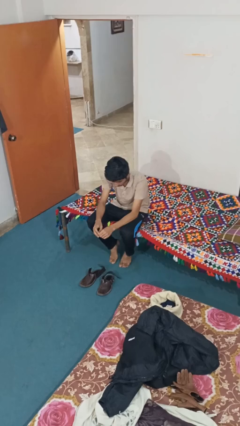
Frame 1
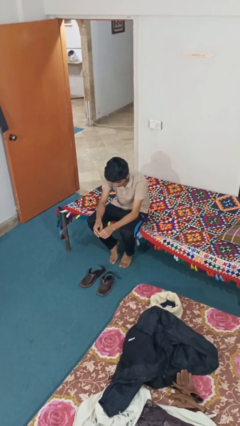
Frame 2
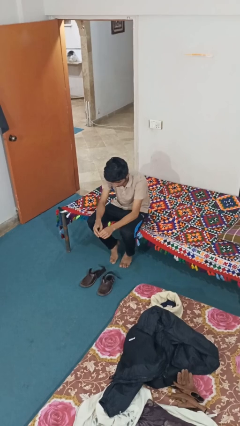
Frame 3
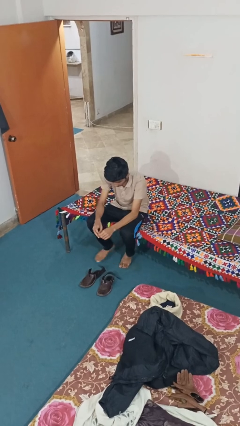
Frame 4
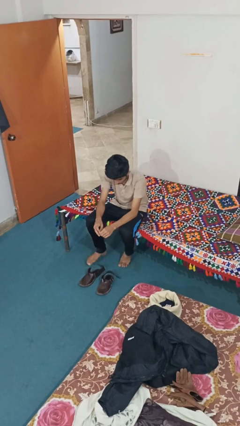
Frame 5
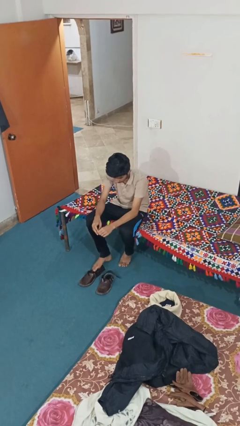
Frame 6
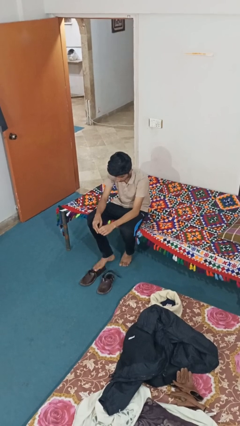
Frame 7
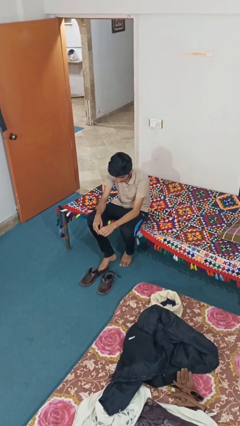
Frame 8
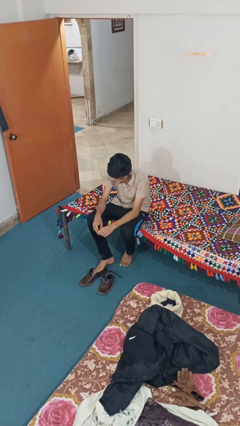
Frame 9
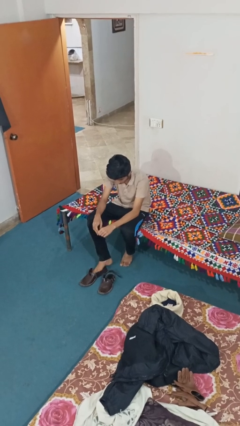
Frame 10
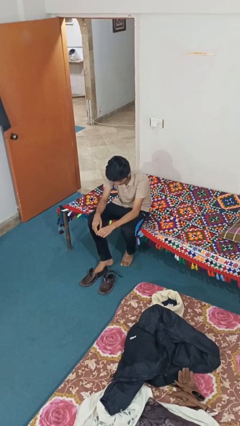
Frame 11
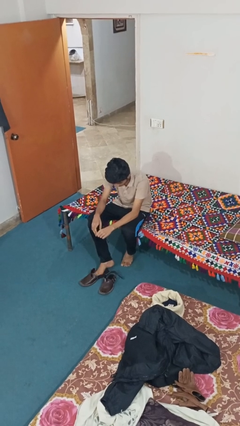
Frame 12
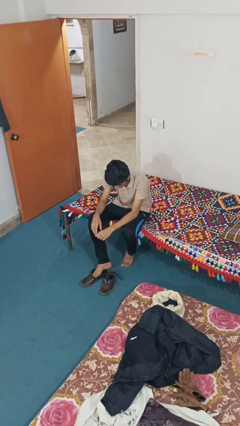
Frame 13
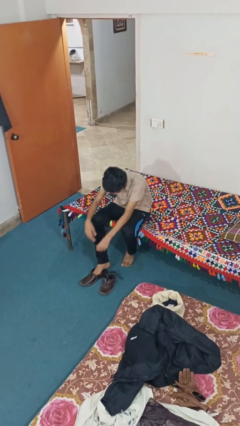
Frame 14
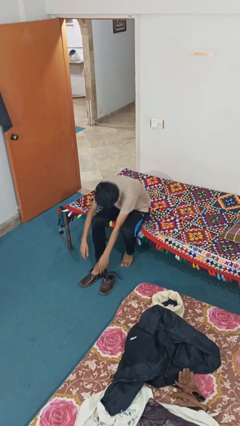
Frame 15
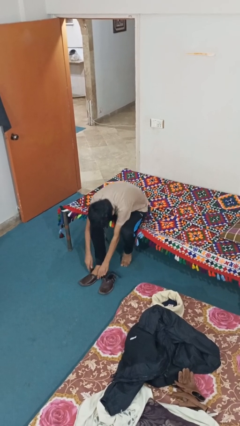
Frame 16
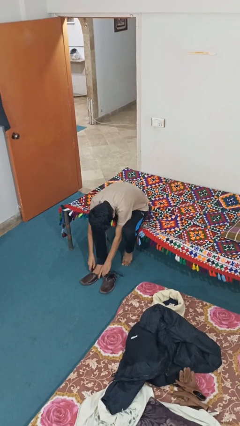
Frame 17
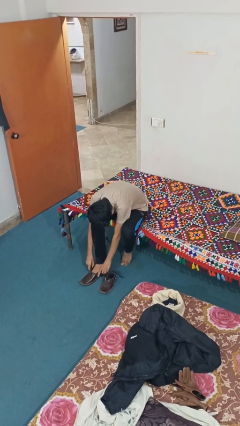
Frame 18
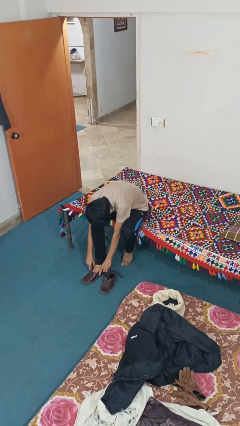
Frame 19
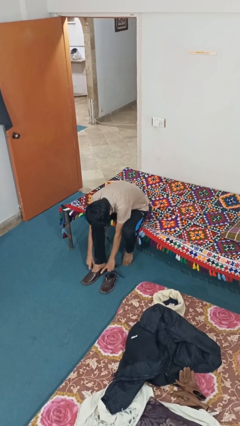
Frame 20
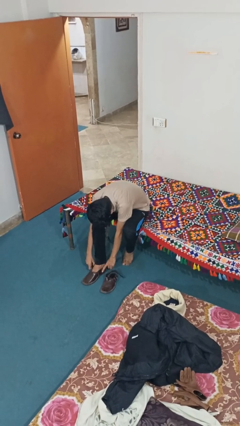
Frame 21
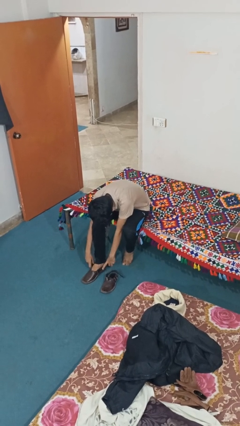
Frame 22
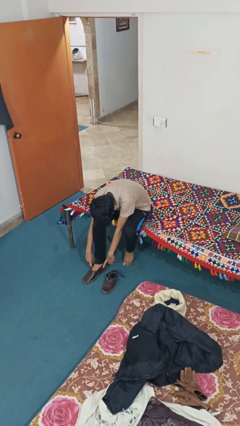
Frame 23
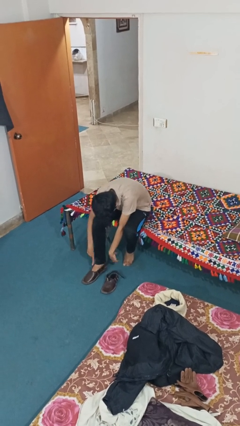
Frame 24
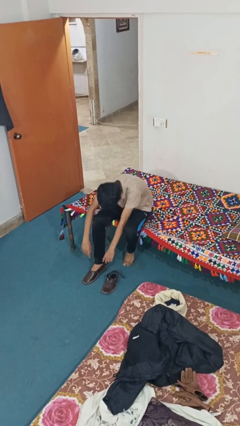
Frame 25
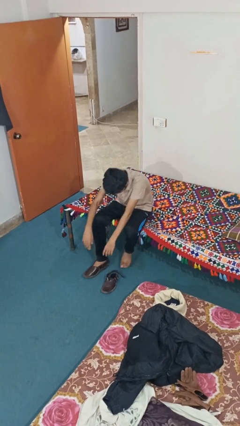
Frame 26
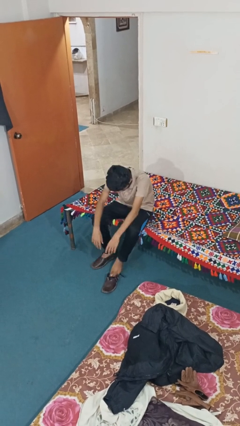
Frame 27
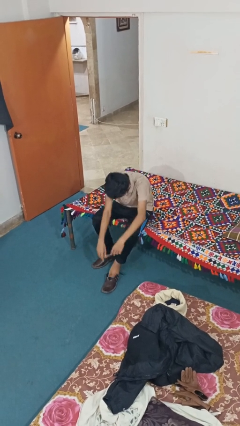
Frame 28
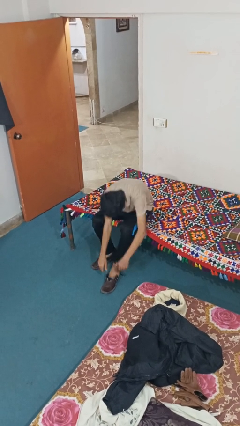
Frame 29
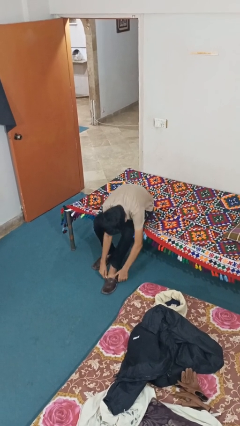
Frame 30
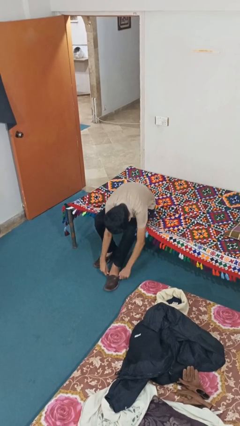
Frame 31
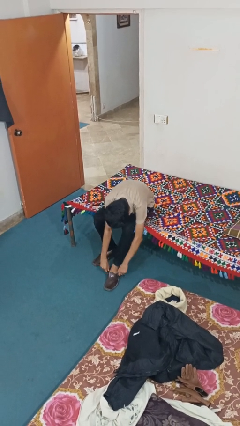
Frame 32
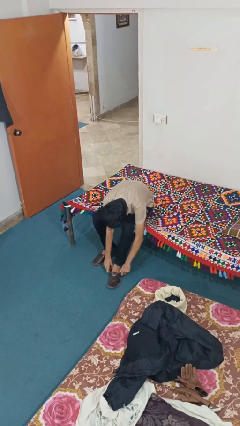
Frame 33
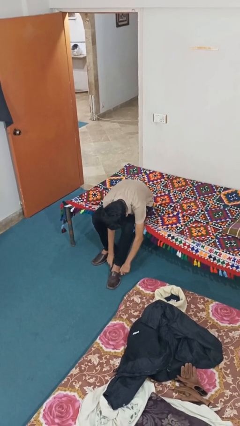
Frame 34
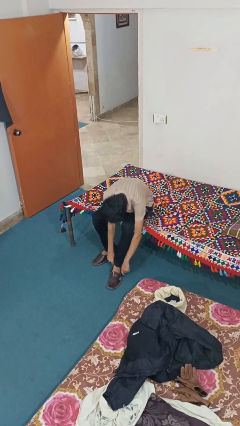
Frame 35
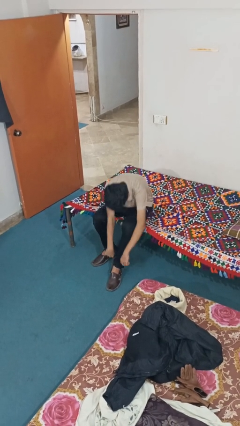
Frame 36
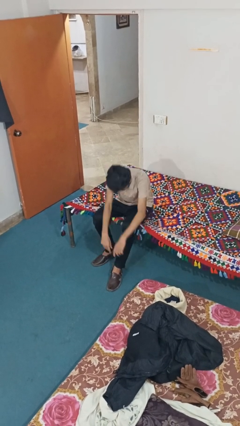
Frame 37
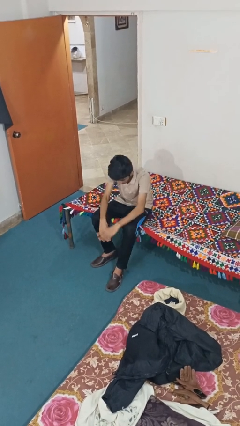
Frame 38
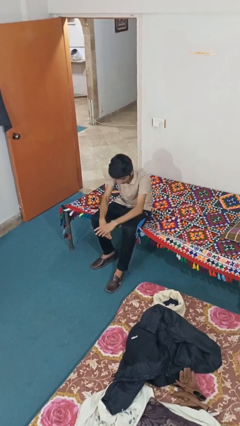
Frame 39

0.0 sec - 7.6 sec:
person puts on shoes

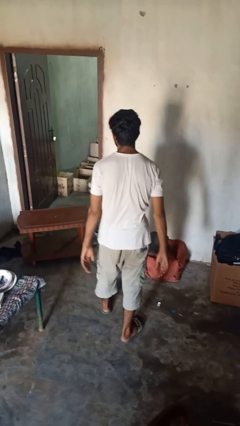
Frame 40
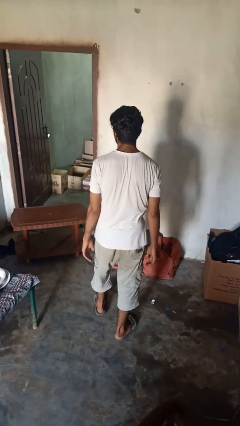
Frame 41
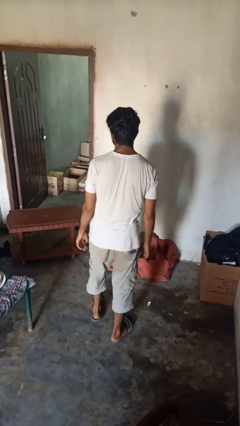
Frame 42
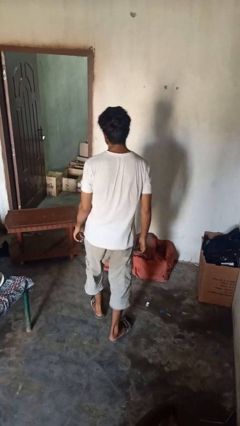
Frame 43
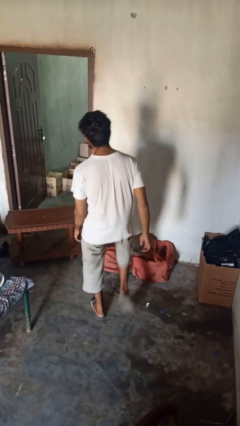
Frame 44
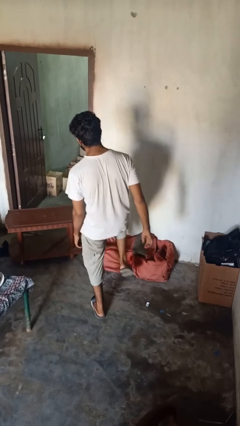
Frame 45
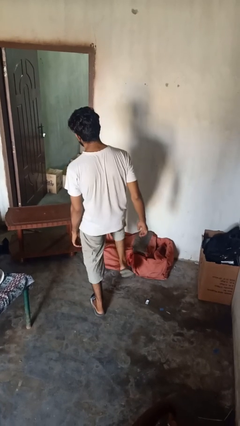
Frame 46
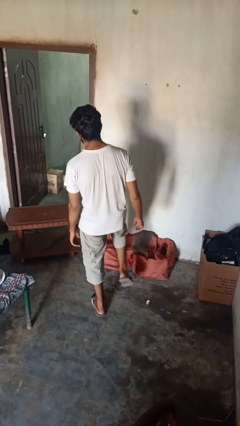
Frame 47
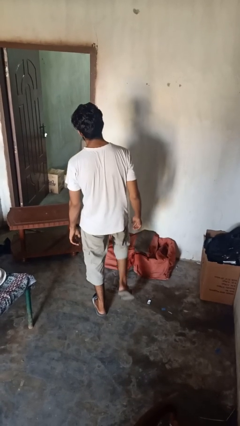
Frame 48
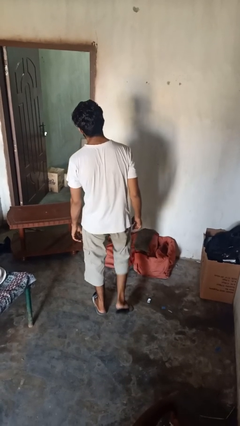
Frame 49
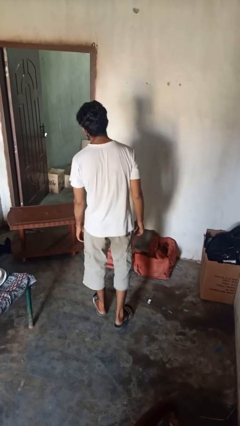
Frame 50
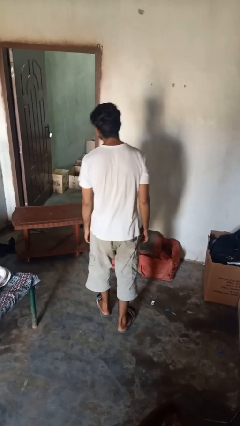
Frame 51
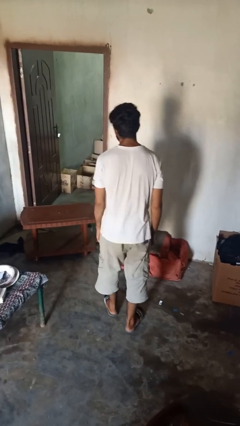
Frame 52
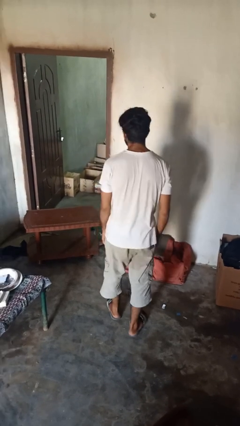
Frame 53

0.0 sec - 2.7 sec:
person karate kicks

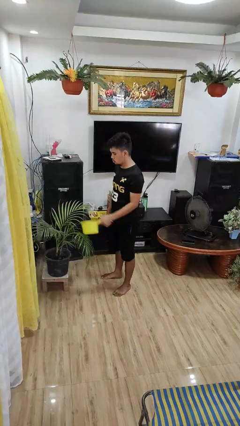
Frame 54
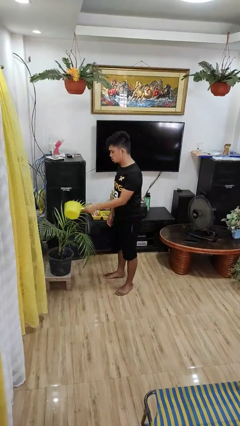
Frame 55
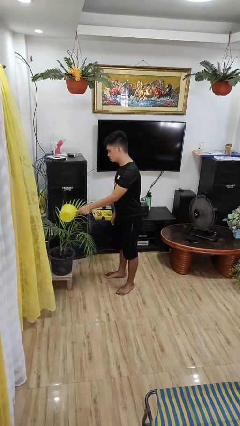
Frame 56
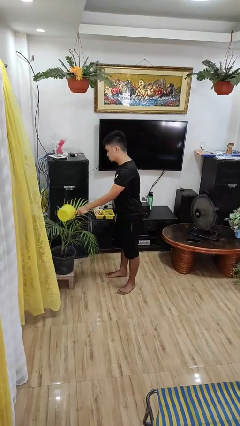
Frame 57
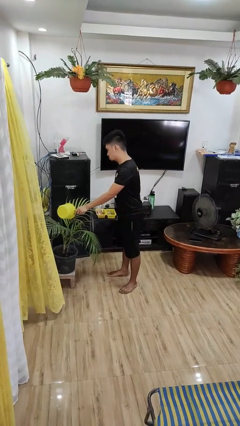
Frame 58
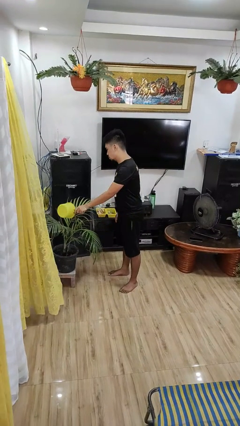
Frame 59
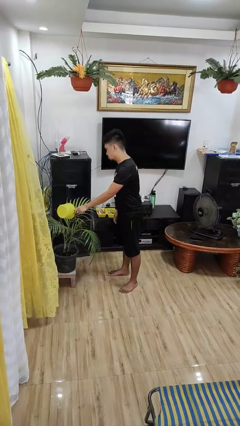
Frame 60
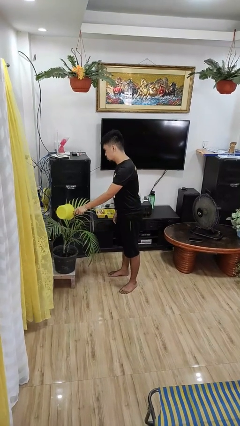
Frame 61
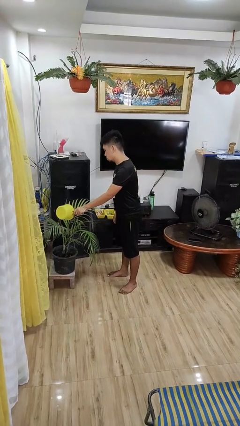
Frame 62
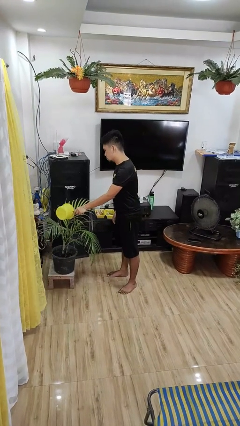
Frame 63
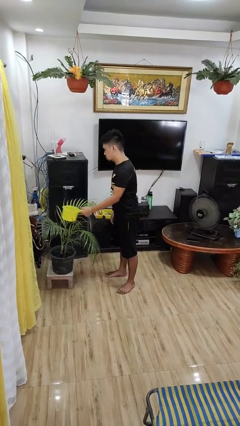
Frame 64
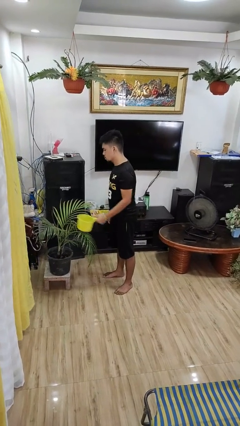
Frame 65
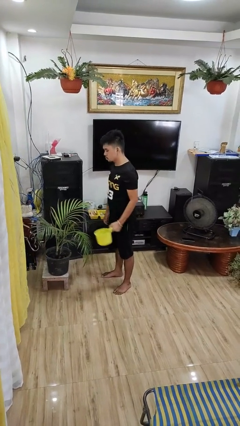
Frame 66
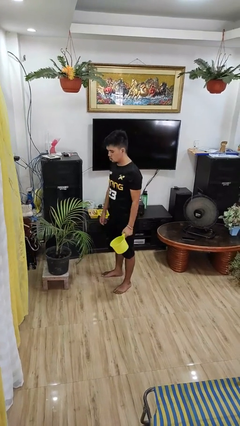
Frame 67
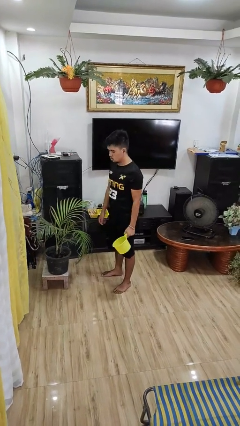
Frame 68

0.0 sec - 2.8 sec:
person waters houseplant

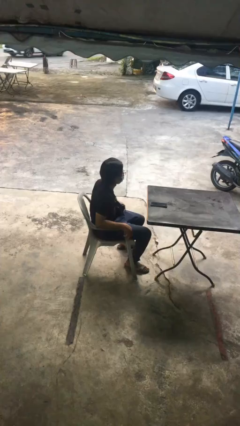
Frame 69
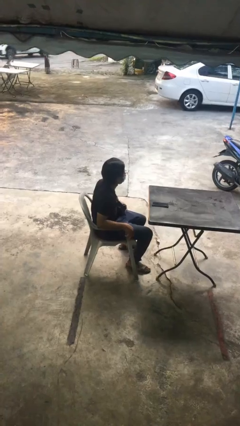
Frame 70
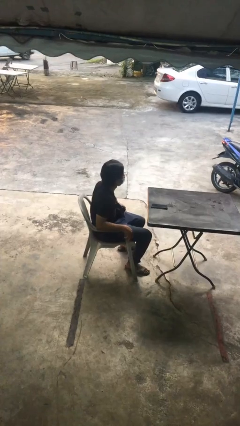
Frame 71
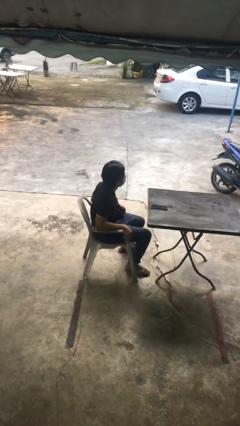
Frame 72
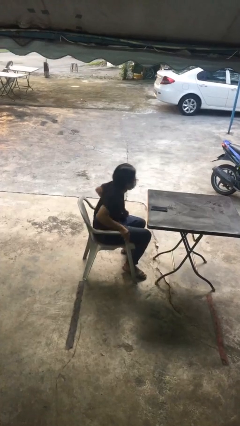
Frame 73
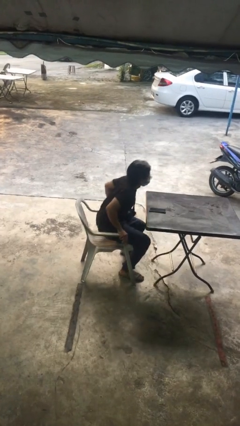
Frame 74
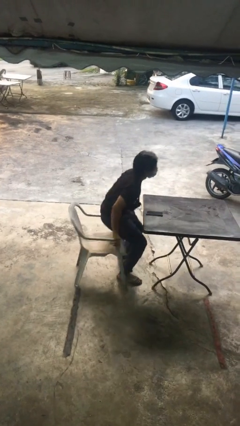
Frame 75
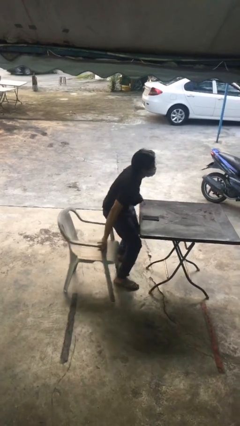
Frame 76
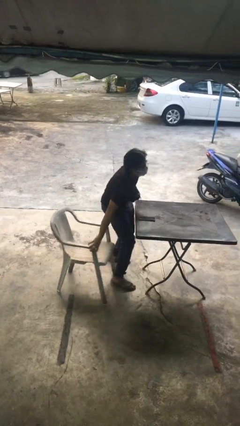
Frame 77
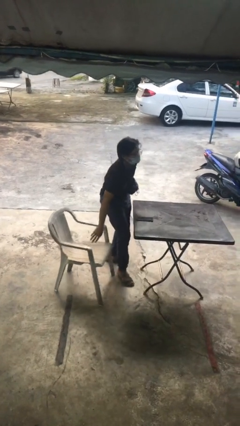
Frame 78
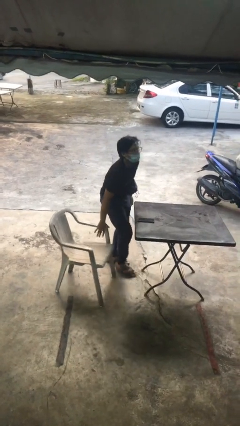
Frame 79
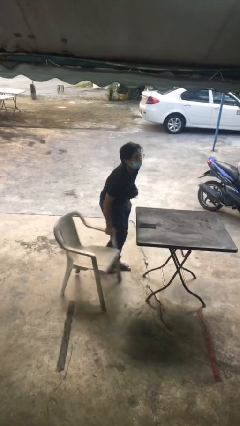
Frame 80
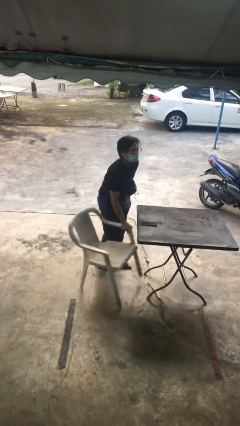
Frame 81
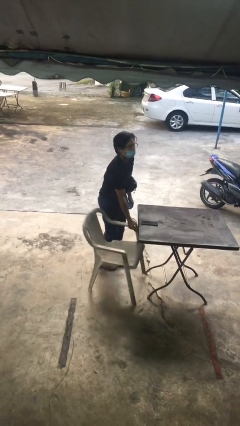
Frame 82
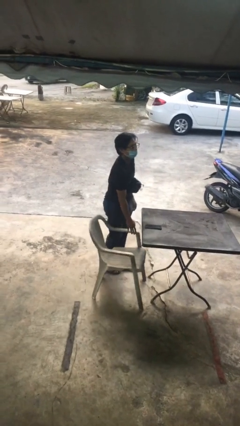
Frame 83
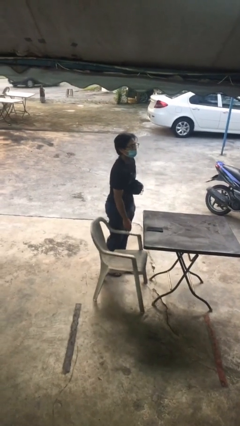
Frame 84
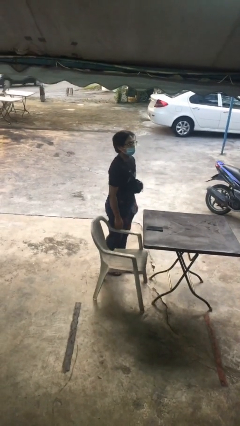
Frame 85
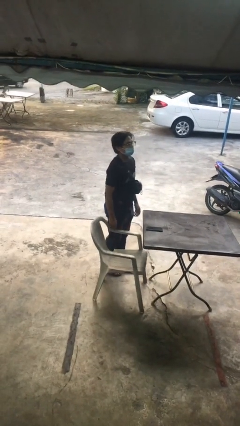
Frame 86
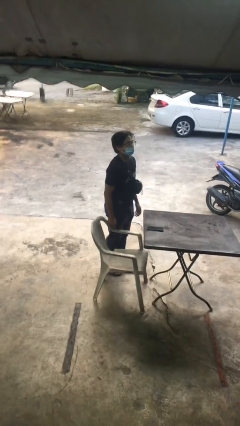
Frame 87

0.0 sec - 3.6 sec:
person stands up

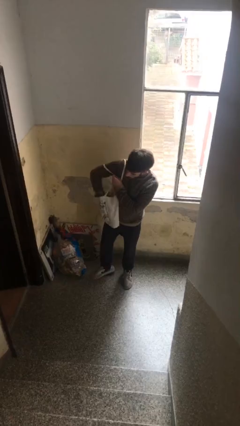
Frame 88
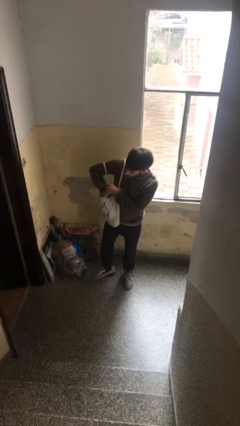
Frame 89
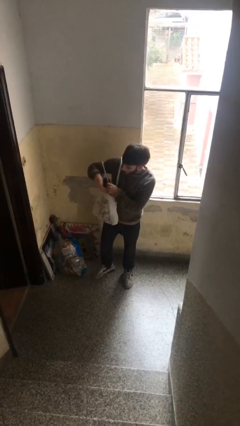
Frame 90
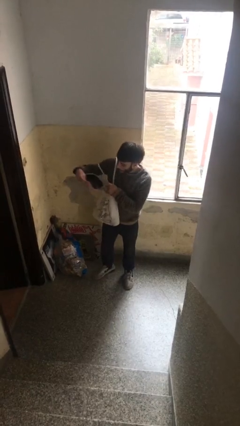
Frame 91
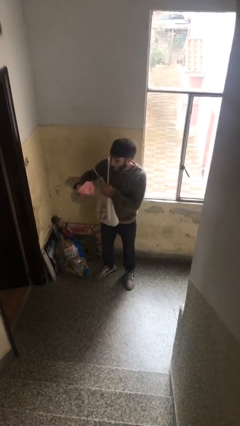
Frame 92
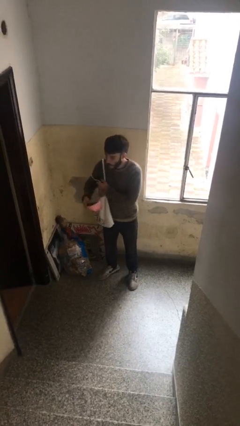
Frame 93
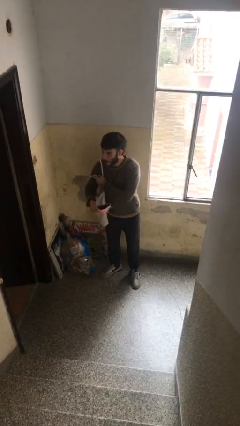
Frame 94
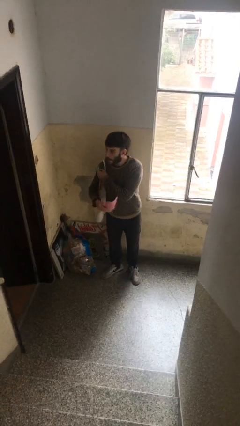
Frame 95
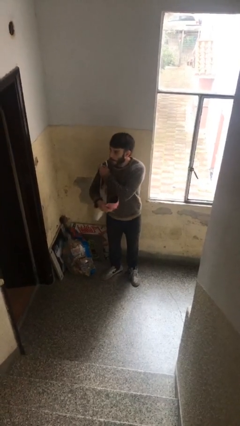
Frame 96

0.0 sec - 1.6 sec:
person takes object from purse
